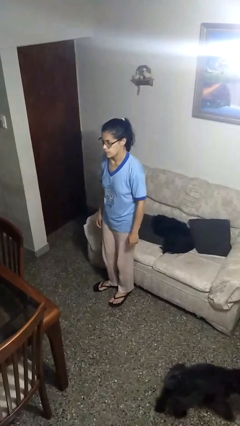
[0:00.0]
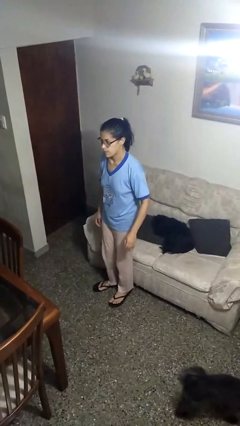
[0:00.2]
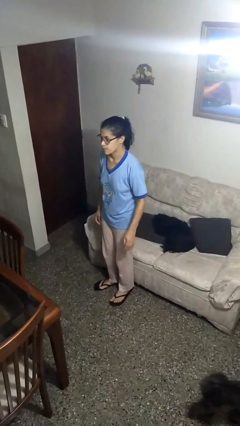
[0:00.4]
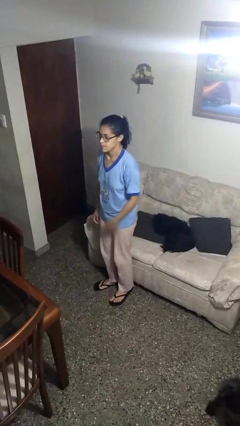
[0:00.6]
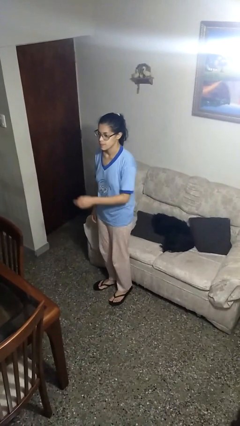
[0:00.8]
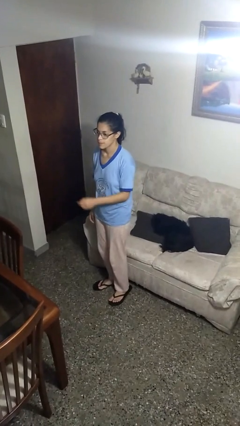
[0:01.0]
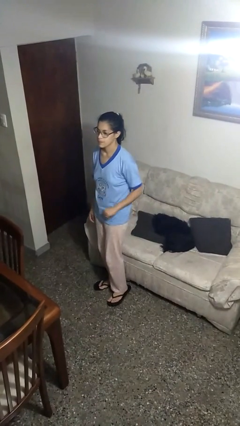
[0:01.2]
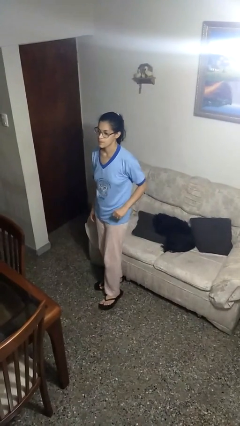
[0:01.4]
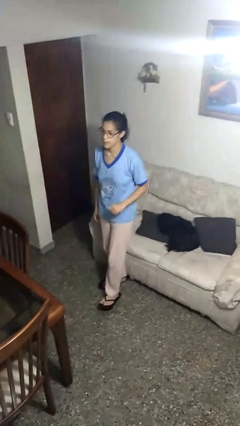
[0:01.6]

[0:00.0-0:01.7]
person slaps hands on thighs

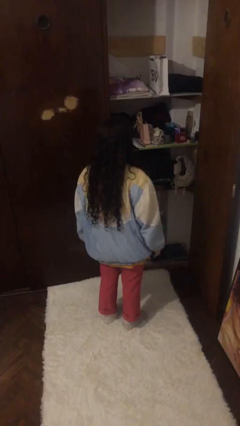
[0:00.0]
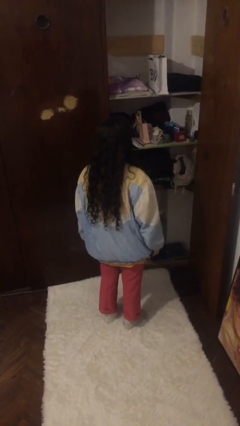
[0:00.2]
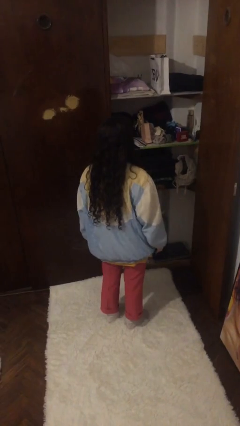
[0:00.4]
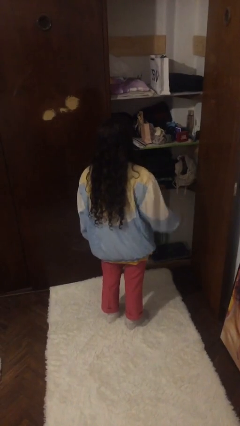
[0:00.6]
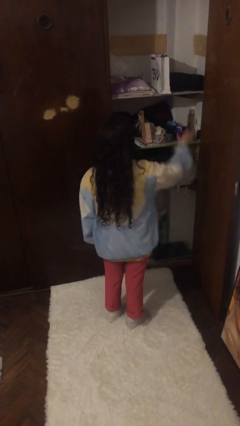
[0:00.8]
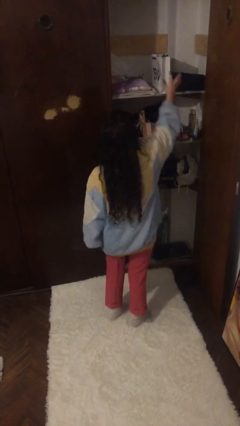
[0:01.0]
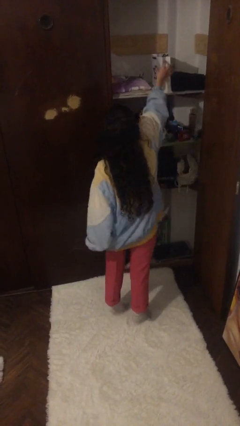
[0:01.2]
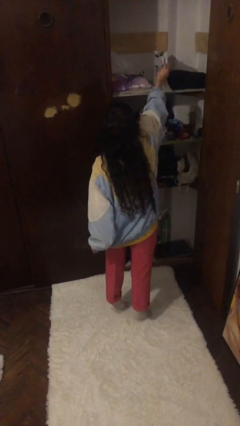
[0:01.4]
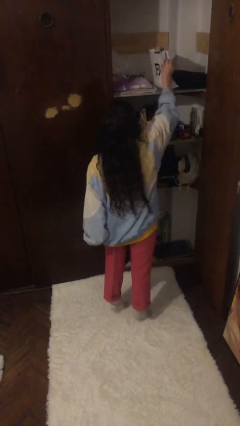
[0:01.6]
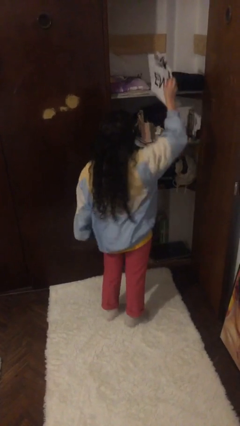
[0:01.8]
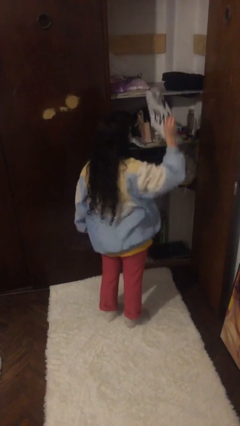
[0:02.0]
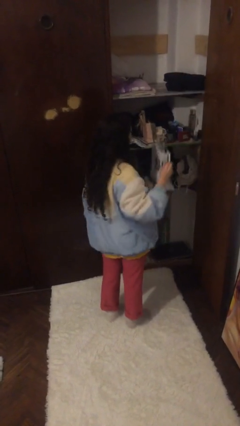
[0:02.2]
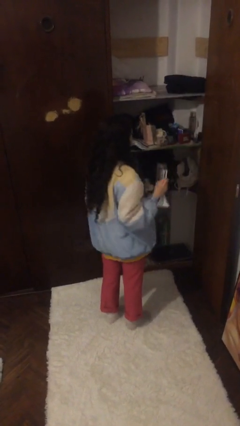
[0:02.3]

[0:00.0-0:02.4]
person picks up object from shelf

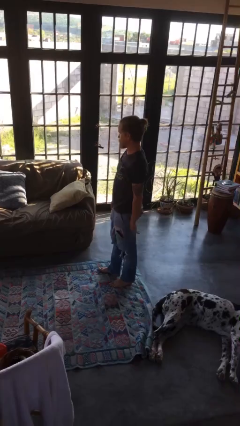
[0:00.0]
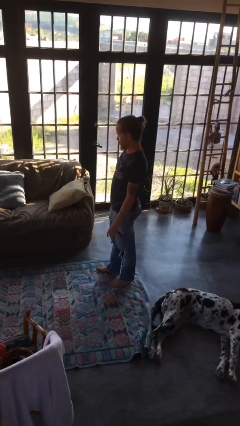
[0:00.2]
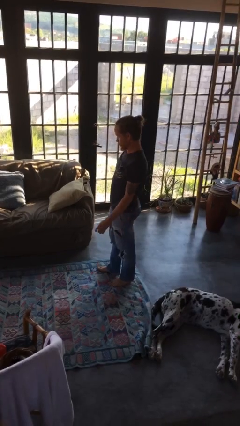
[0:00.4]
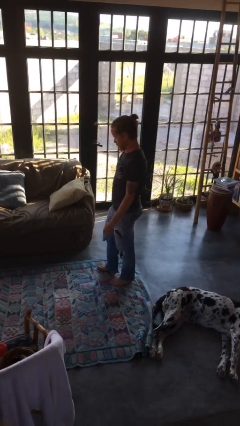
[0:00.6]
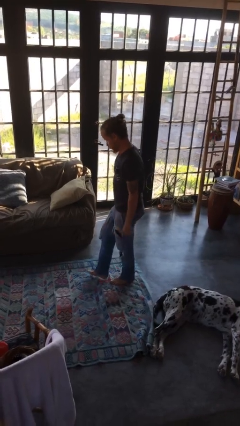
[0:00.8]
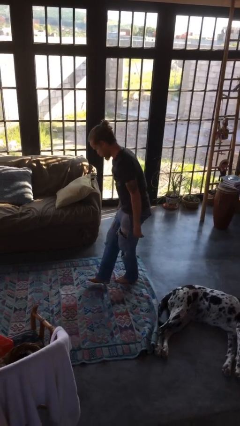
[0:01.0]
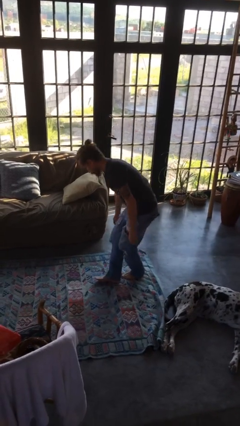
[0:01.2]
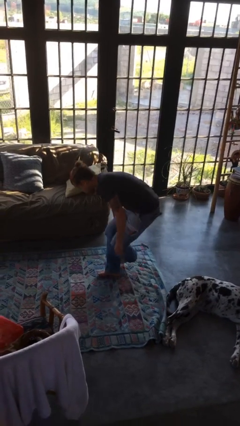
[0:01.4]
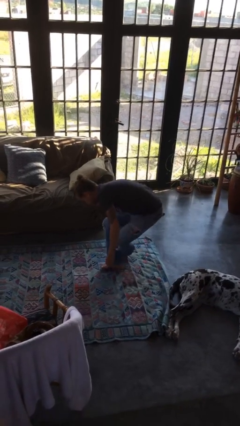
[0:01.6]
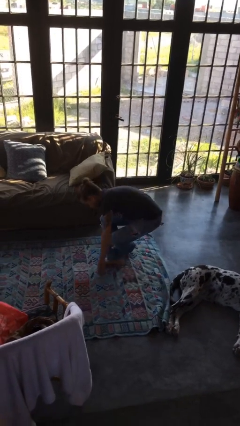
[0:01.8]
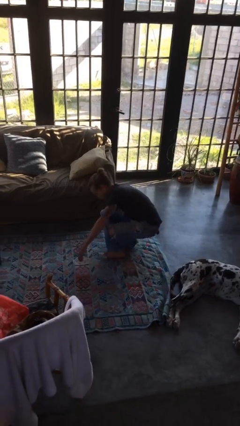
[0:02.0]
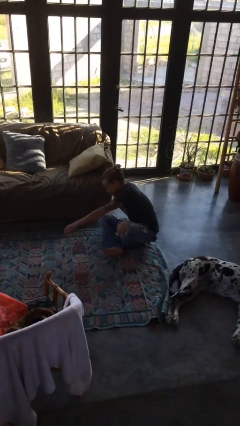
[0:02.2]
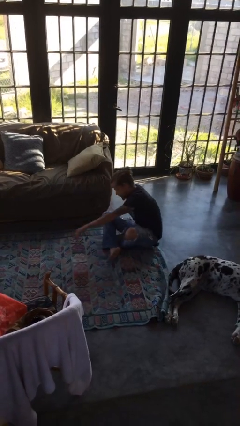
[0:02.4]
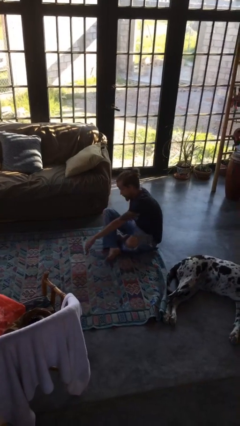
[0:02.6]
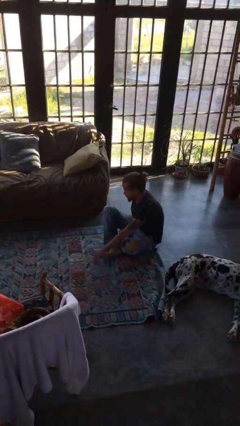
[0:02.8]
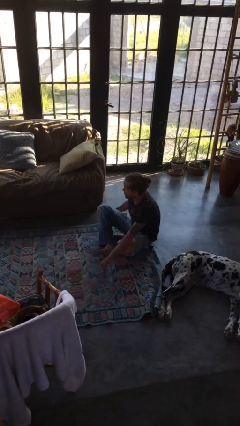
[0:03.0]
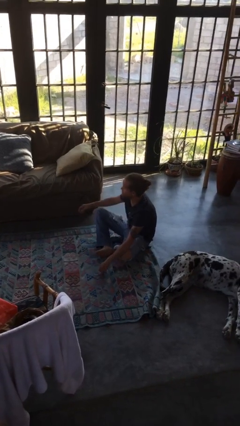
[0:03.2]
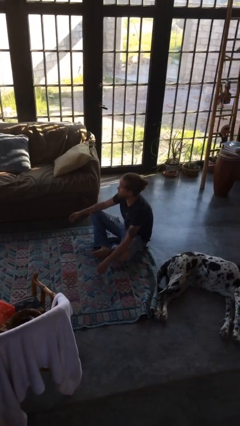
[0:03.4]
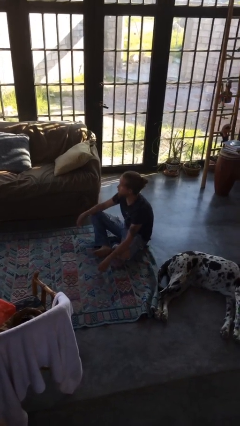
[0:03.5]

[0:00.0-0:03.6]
person sits crisscross

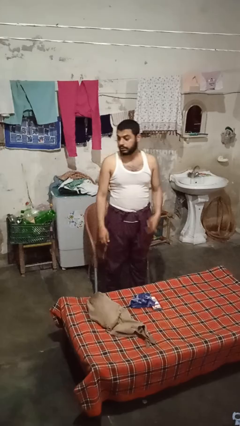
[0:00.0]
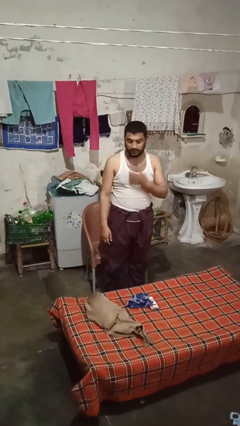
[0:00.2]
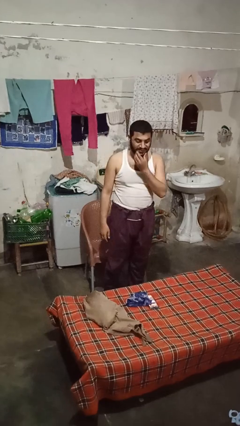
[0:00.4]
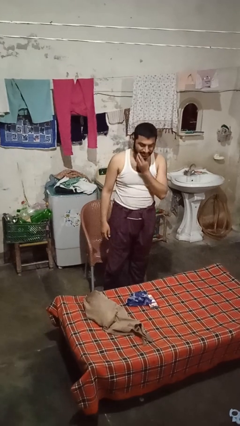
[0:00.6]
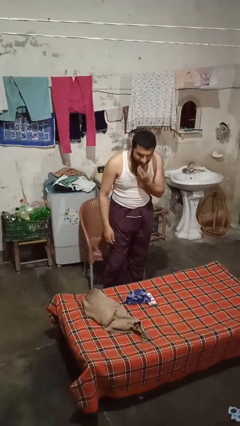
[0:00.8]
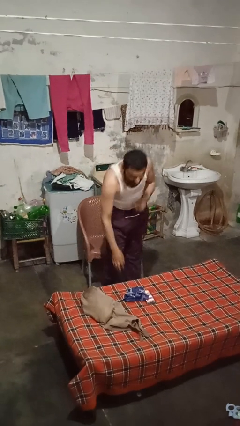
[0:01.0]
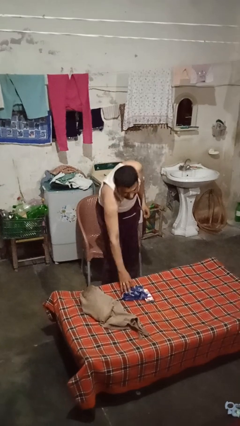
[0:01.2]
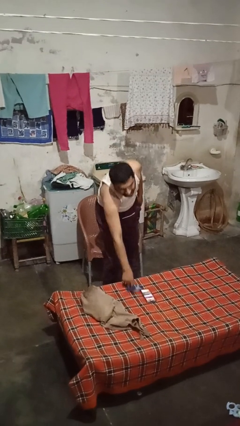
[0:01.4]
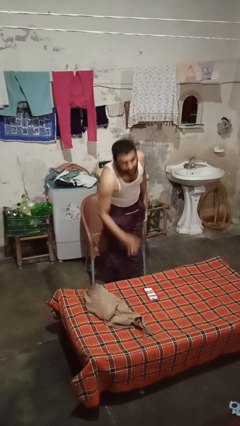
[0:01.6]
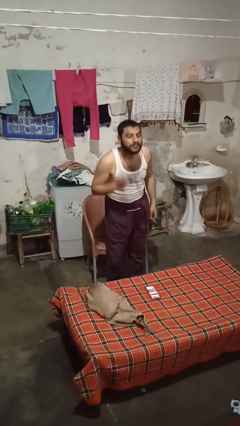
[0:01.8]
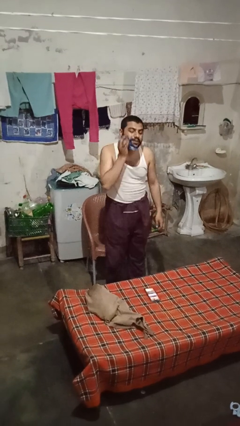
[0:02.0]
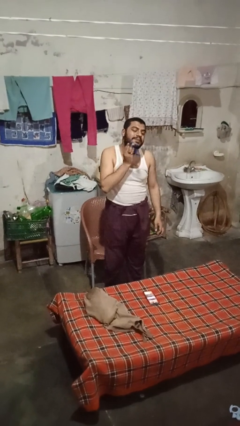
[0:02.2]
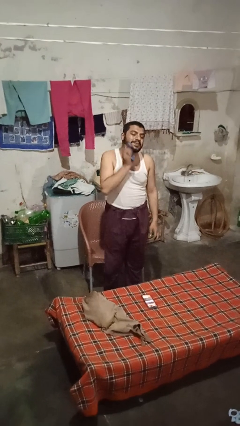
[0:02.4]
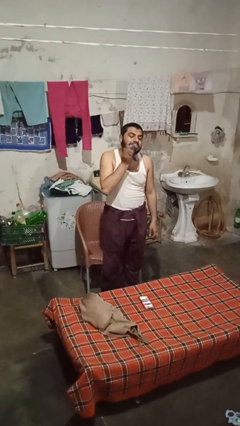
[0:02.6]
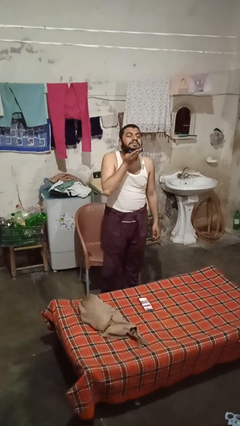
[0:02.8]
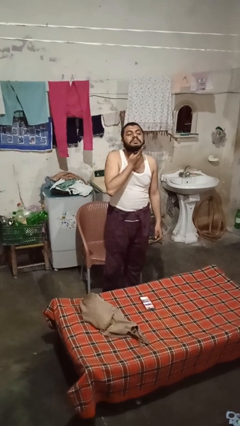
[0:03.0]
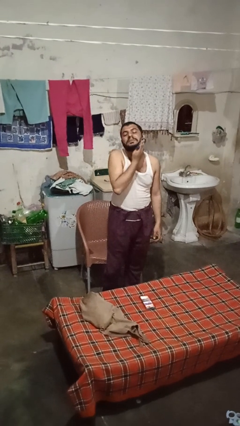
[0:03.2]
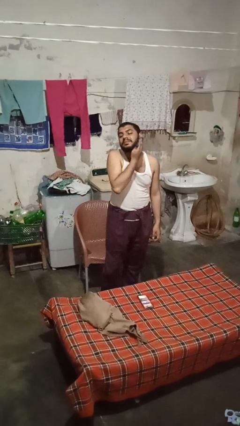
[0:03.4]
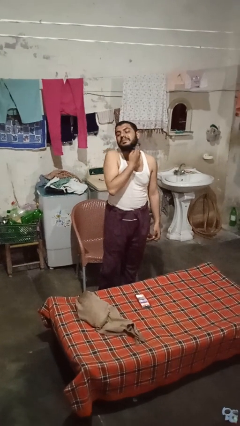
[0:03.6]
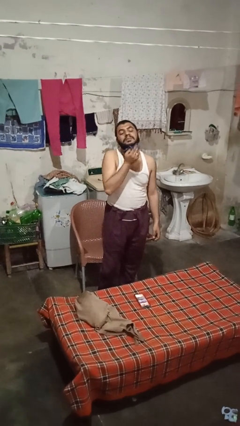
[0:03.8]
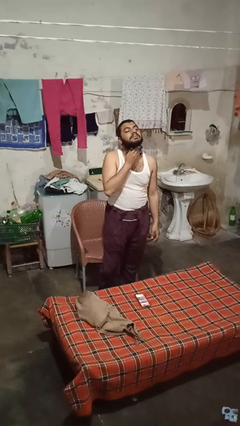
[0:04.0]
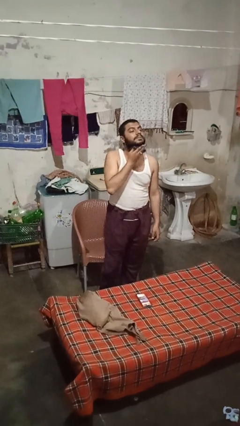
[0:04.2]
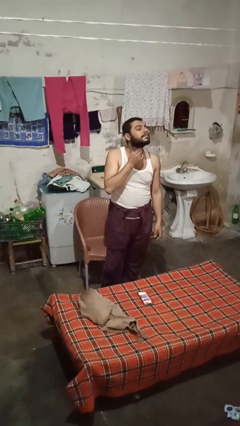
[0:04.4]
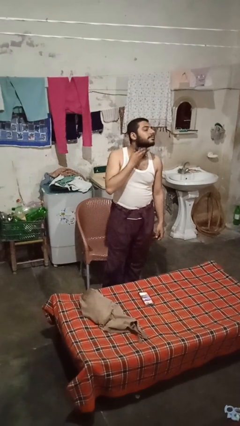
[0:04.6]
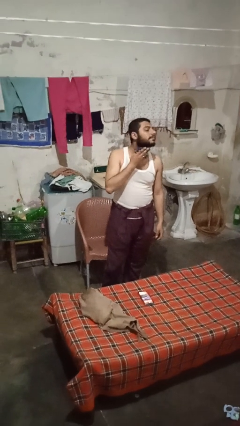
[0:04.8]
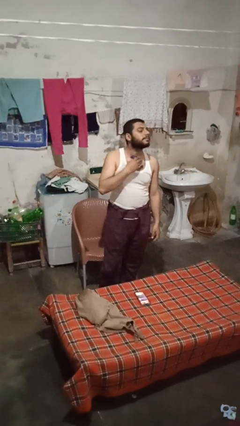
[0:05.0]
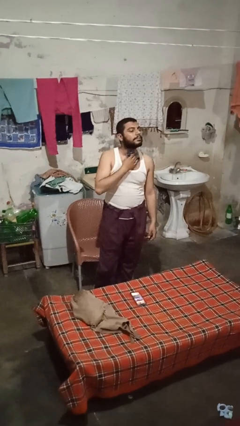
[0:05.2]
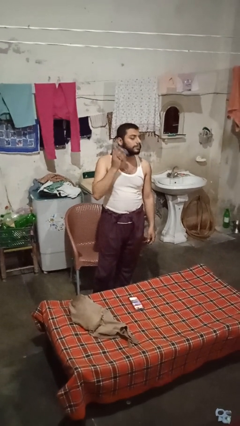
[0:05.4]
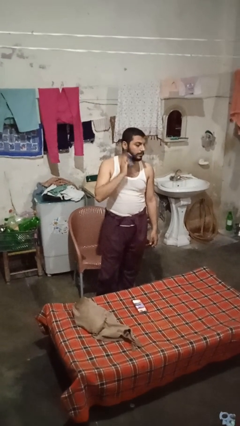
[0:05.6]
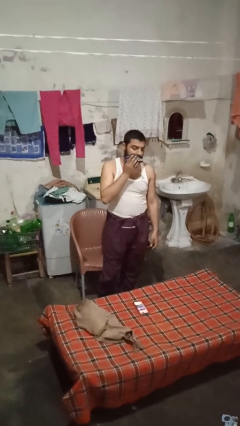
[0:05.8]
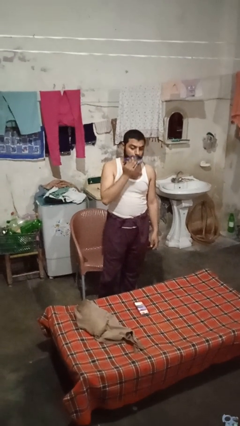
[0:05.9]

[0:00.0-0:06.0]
person wipes mouth with napkin

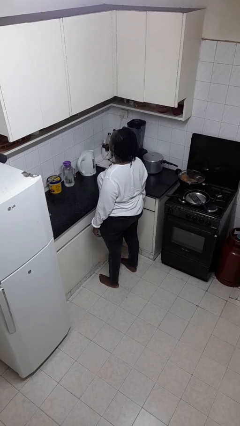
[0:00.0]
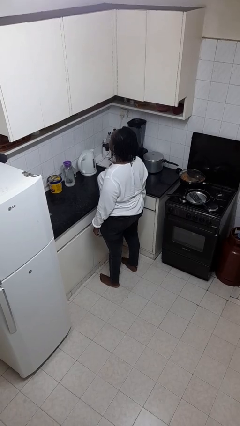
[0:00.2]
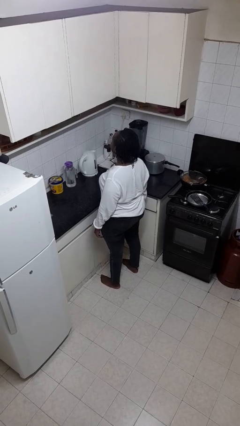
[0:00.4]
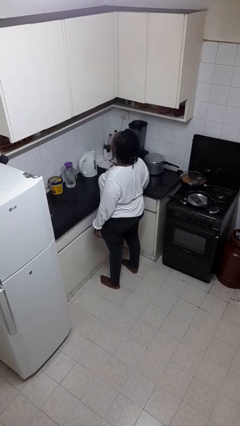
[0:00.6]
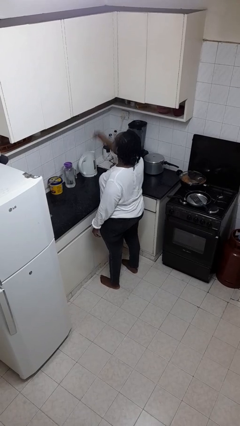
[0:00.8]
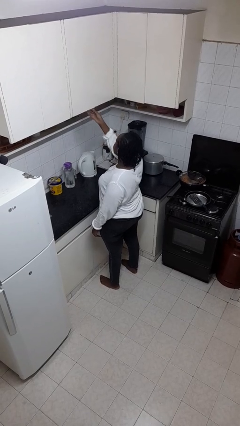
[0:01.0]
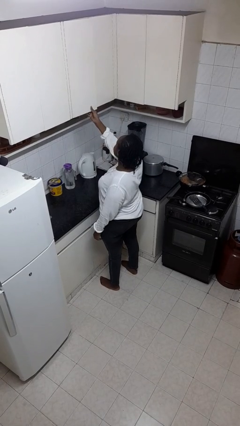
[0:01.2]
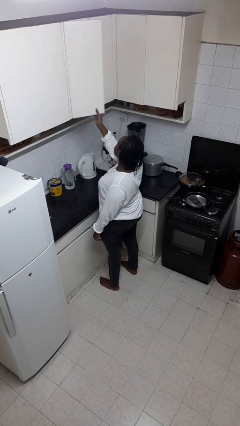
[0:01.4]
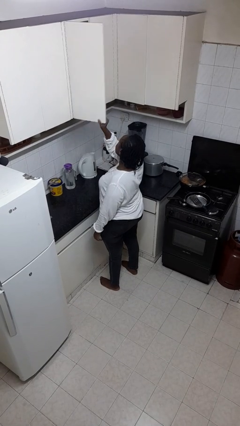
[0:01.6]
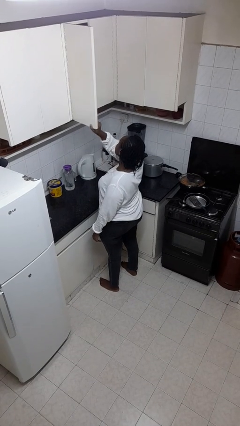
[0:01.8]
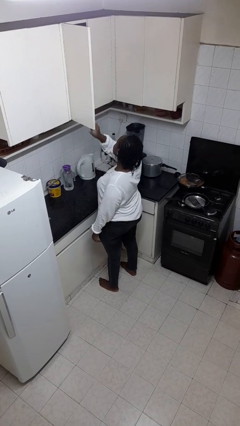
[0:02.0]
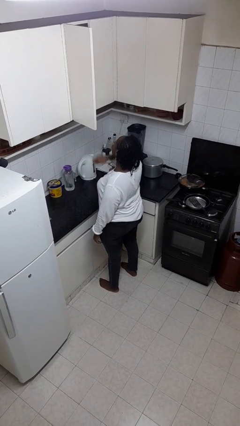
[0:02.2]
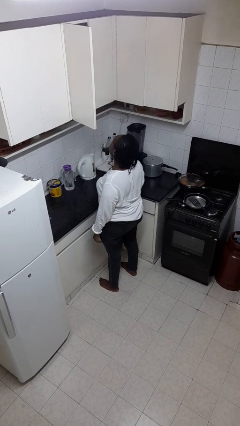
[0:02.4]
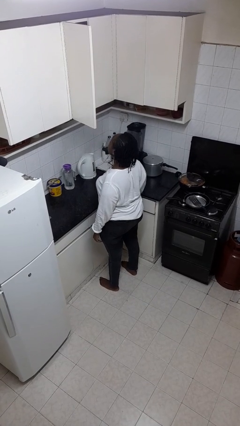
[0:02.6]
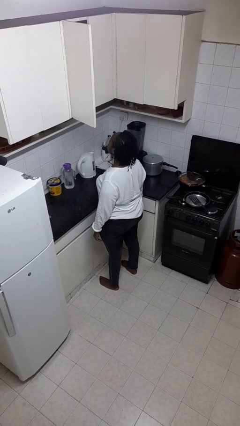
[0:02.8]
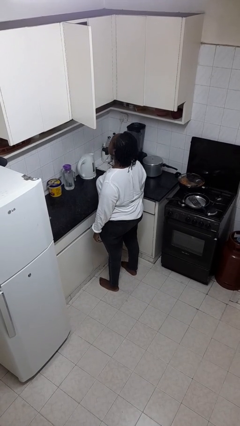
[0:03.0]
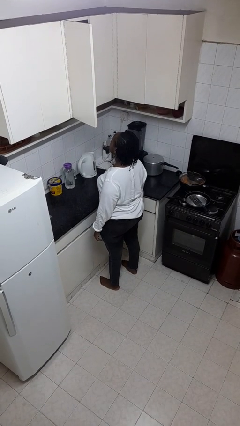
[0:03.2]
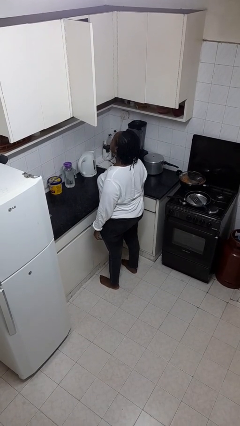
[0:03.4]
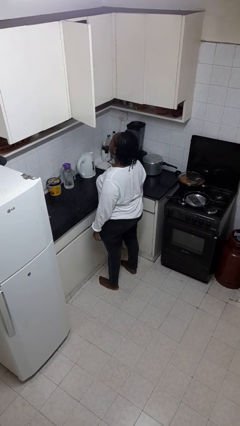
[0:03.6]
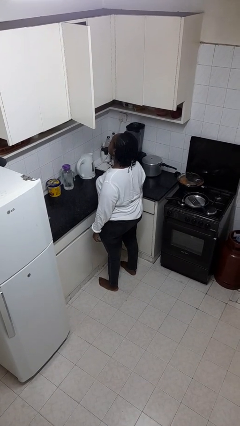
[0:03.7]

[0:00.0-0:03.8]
person opens cabinet

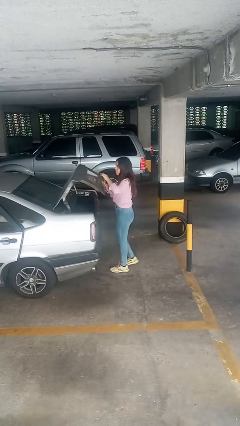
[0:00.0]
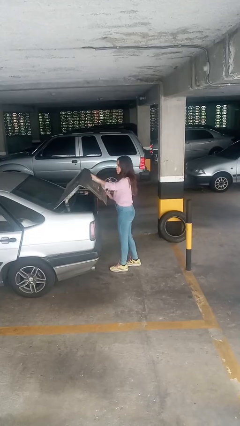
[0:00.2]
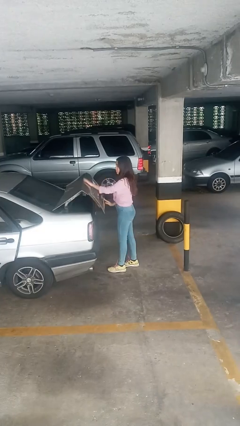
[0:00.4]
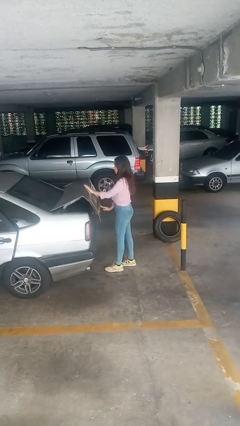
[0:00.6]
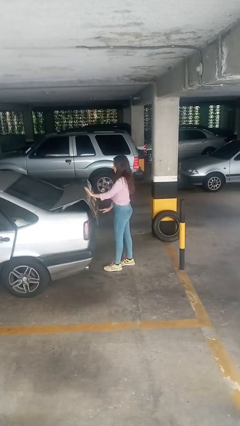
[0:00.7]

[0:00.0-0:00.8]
person closes car trunk
